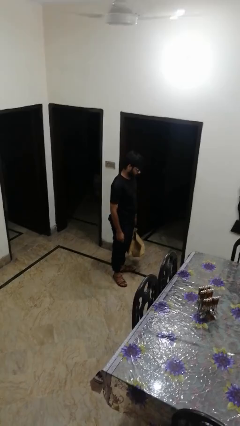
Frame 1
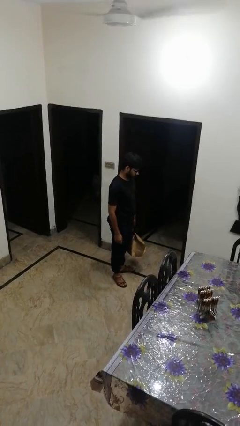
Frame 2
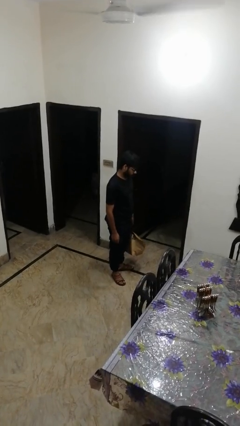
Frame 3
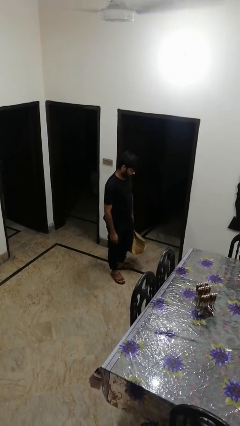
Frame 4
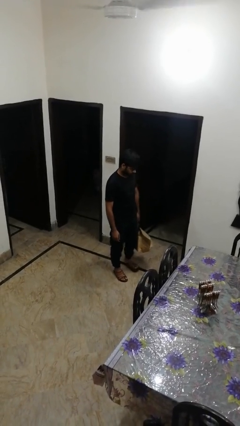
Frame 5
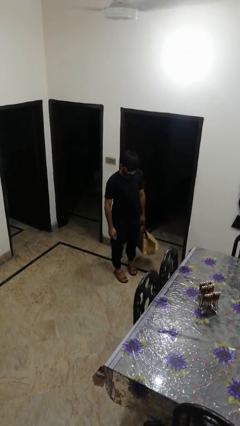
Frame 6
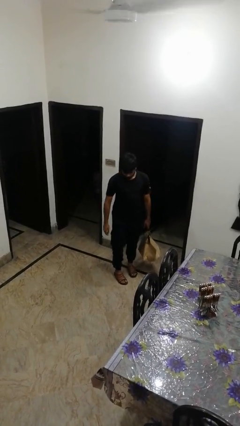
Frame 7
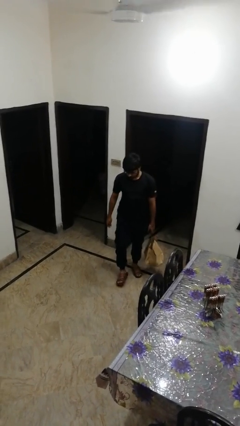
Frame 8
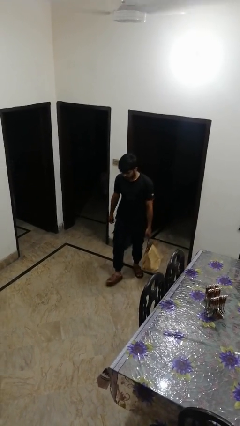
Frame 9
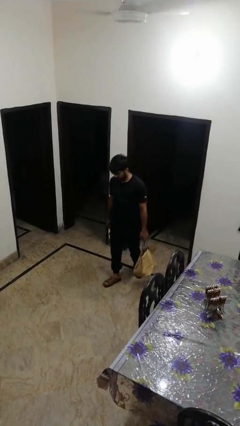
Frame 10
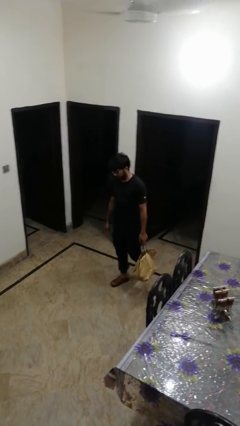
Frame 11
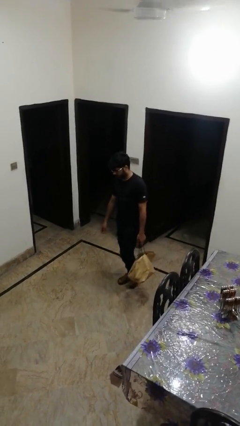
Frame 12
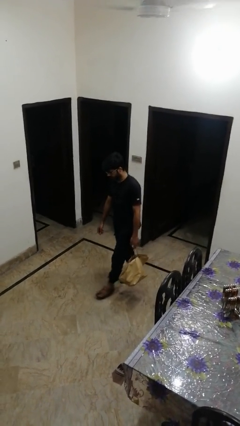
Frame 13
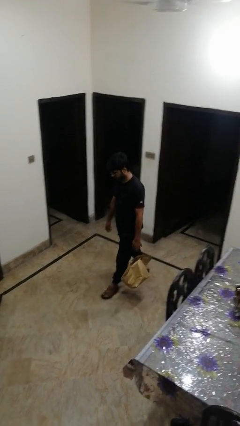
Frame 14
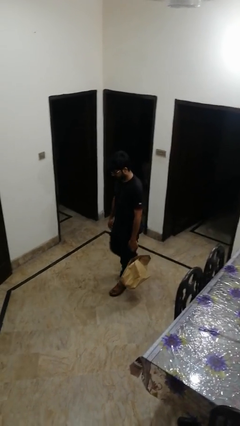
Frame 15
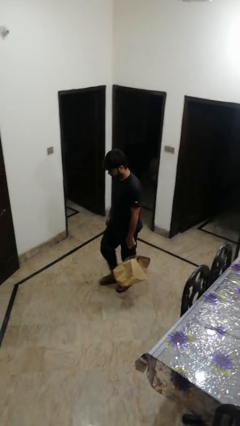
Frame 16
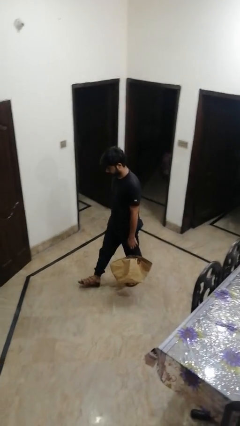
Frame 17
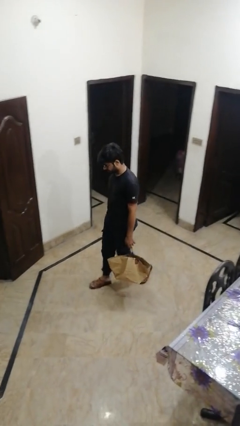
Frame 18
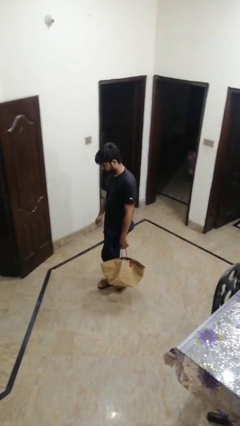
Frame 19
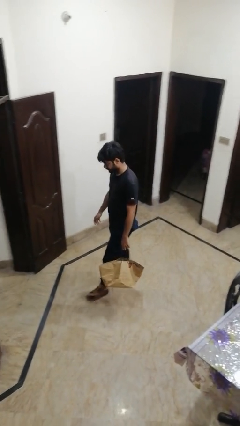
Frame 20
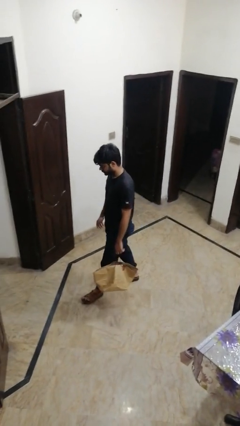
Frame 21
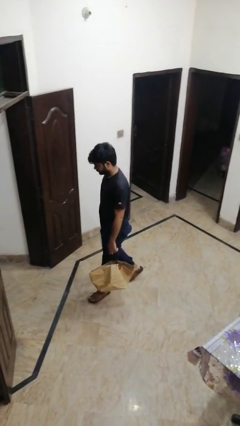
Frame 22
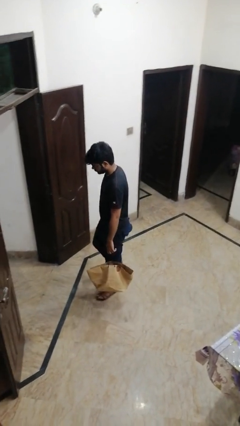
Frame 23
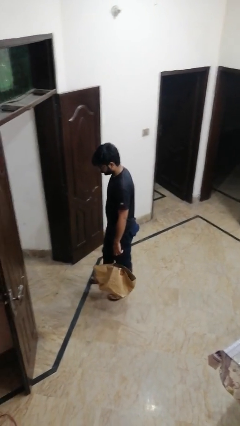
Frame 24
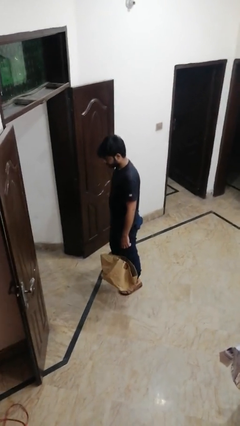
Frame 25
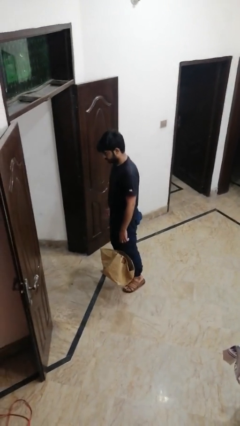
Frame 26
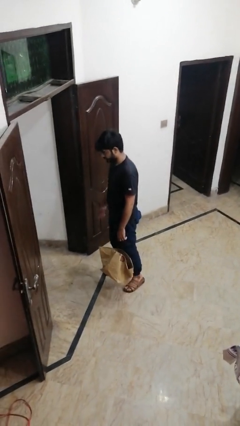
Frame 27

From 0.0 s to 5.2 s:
person carries groceries

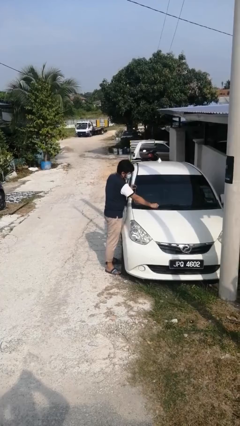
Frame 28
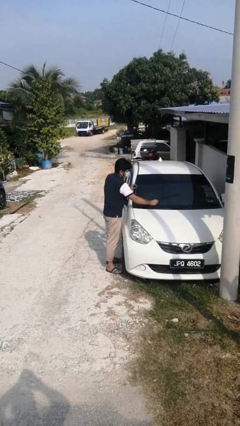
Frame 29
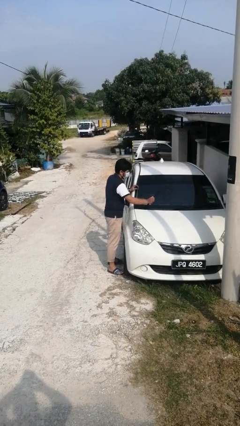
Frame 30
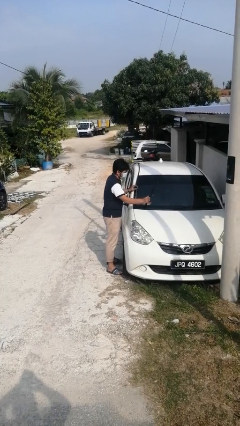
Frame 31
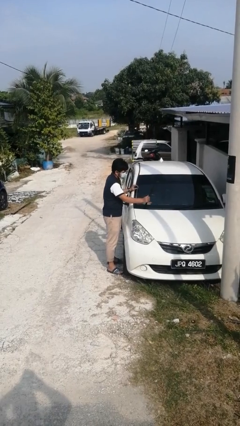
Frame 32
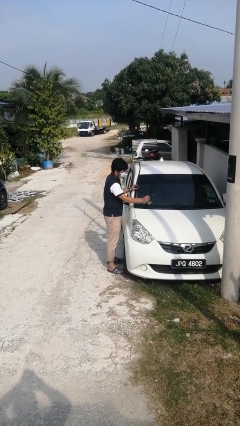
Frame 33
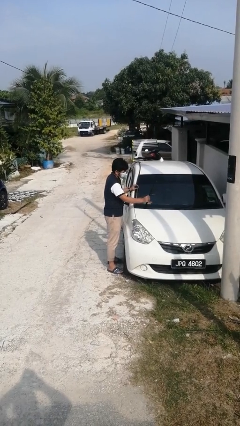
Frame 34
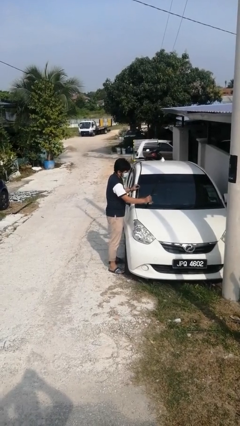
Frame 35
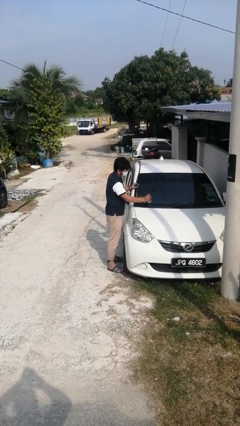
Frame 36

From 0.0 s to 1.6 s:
person flips up car wipers

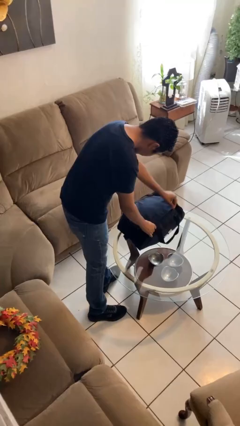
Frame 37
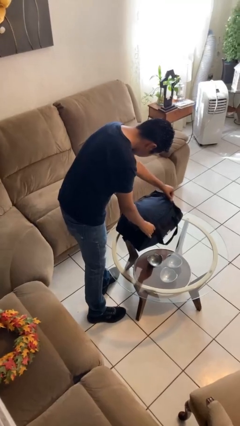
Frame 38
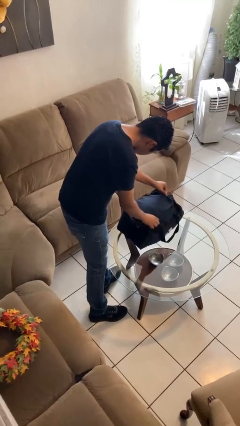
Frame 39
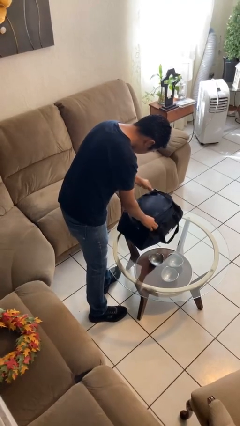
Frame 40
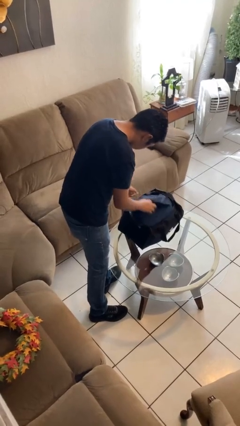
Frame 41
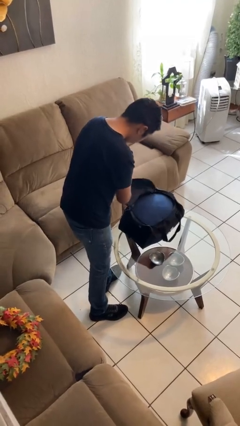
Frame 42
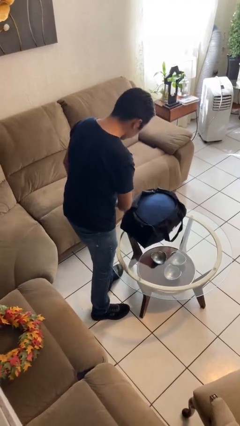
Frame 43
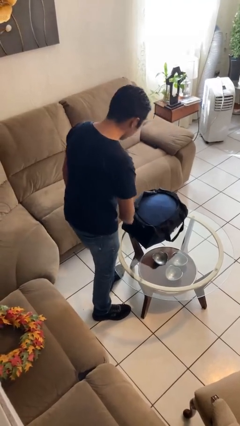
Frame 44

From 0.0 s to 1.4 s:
person opens suitcase

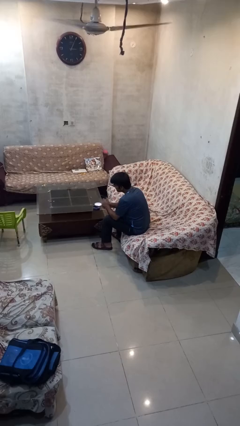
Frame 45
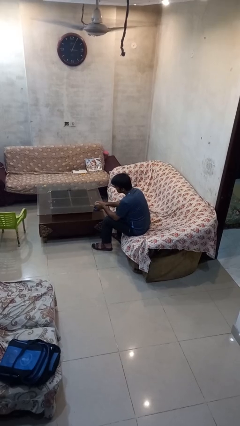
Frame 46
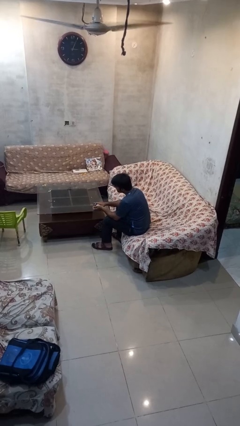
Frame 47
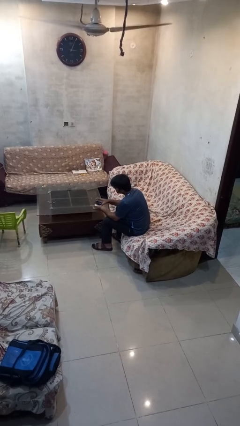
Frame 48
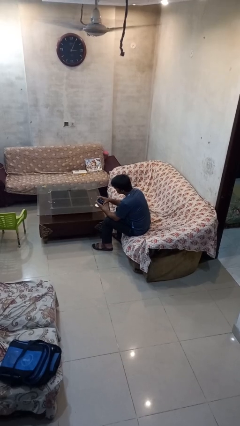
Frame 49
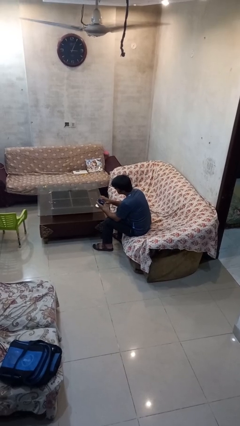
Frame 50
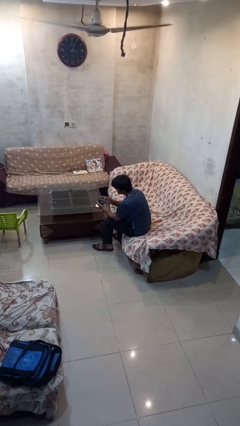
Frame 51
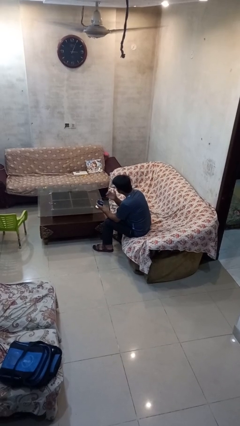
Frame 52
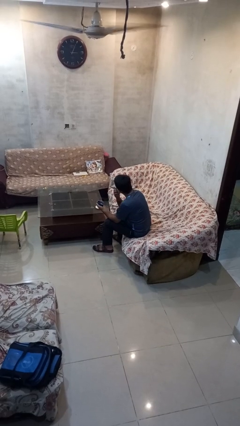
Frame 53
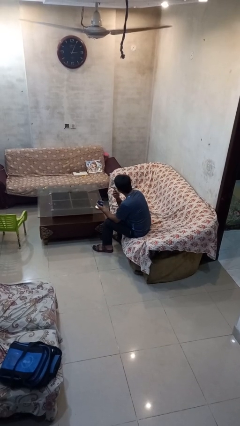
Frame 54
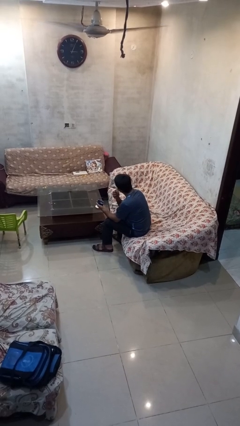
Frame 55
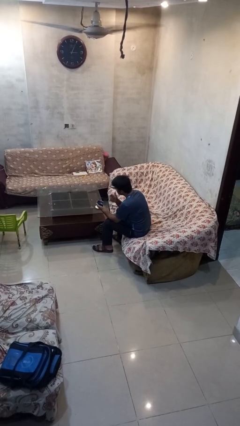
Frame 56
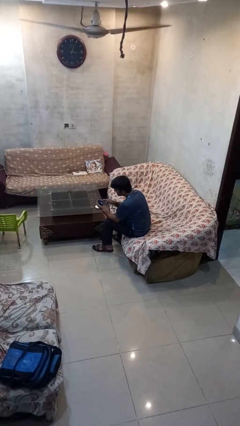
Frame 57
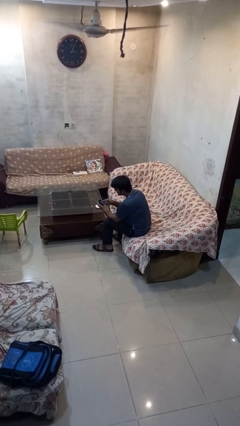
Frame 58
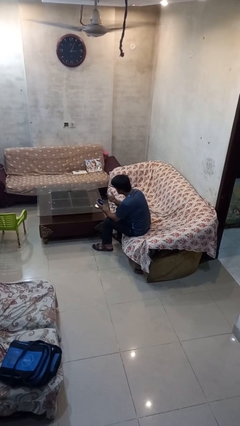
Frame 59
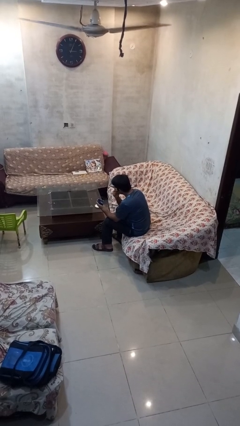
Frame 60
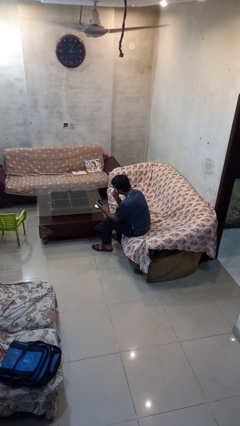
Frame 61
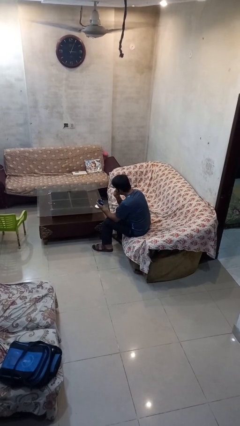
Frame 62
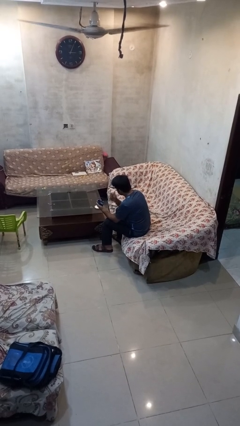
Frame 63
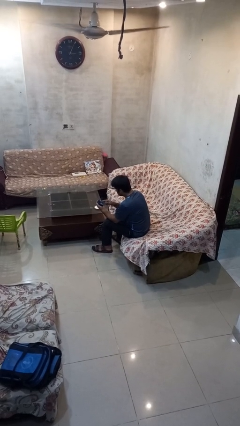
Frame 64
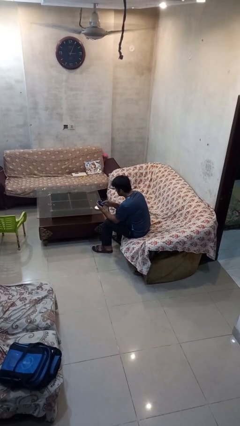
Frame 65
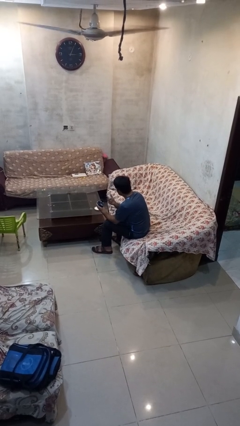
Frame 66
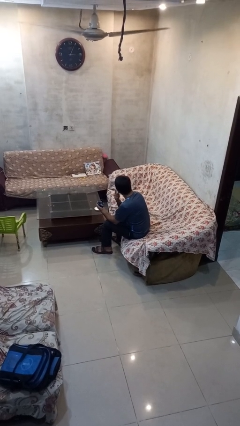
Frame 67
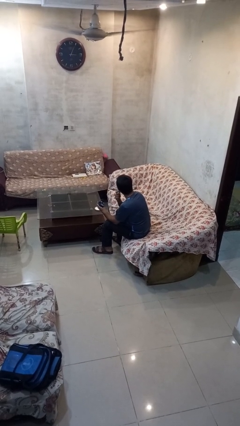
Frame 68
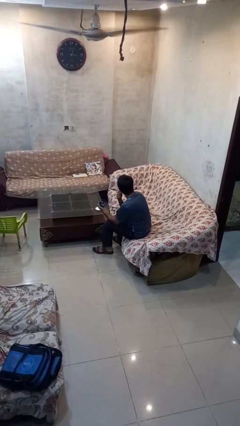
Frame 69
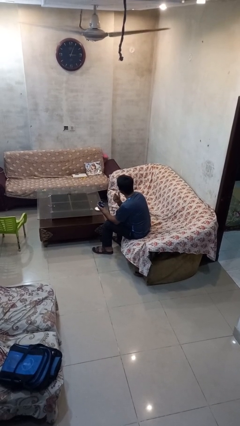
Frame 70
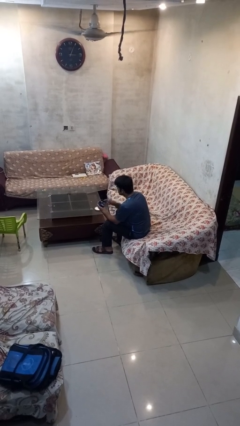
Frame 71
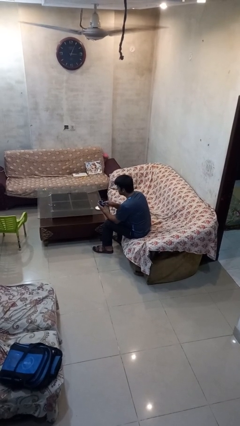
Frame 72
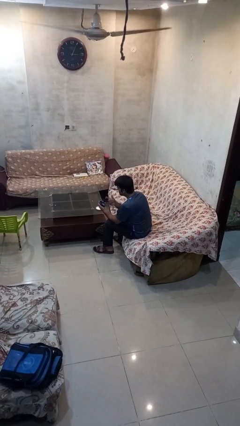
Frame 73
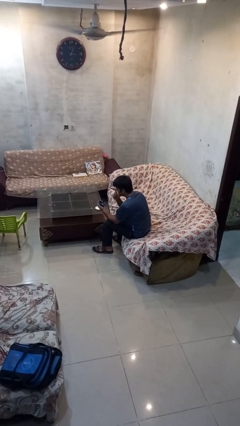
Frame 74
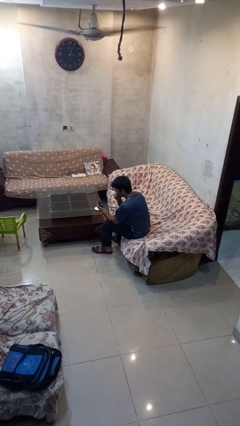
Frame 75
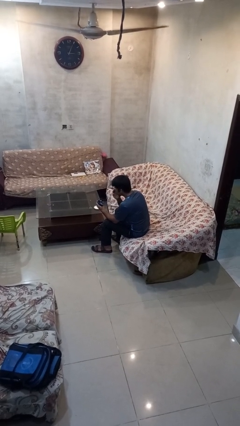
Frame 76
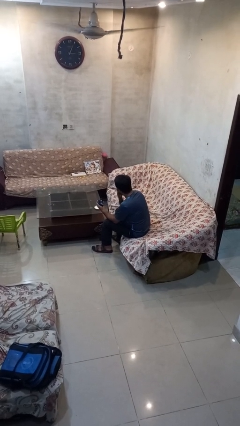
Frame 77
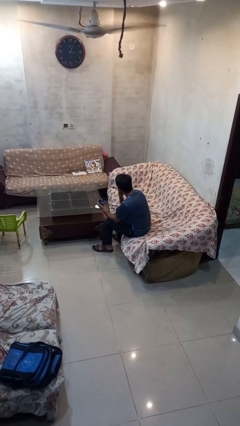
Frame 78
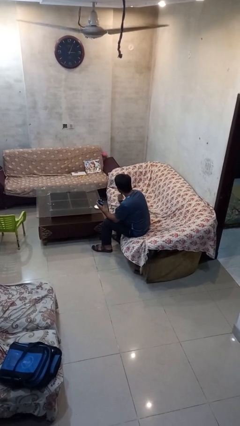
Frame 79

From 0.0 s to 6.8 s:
person applies facial moisturizer

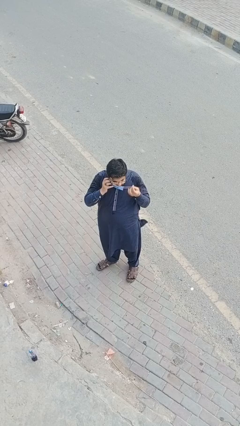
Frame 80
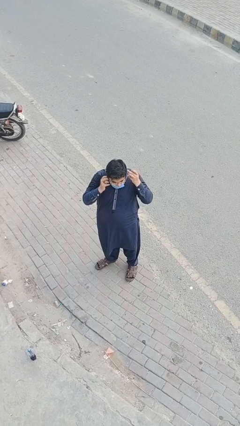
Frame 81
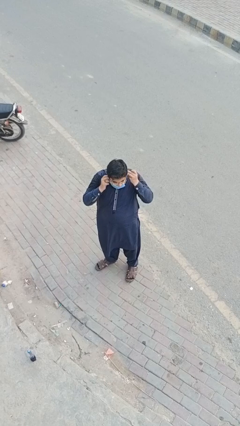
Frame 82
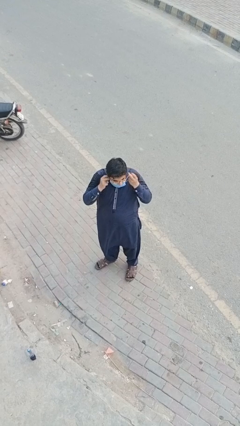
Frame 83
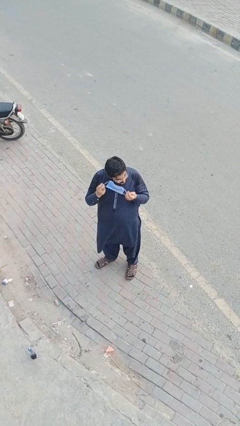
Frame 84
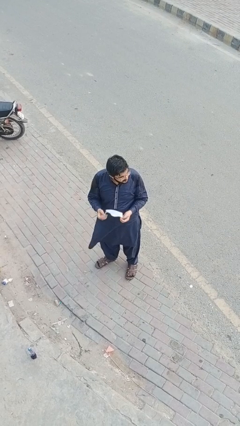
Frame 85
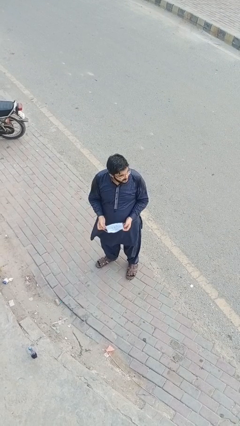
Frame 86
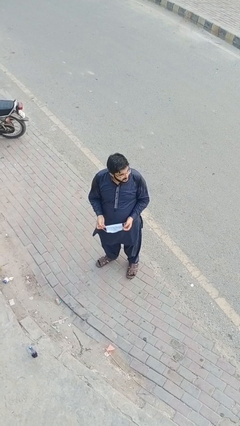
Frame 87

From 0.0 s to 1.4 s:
person takes off facemask

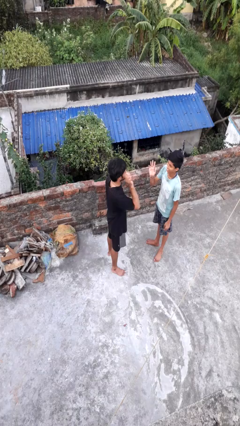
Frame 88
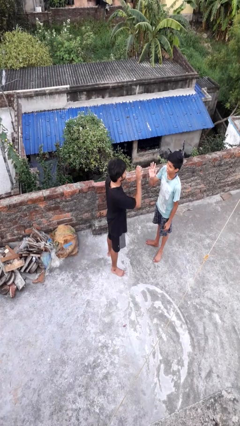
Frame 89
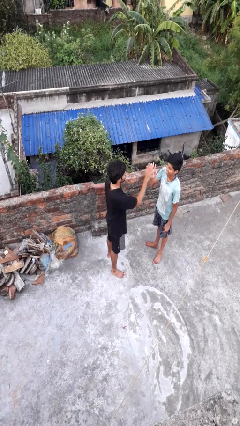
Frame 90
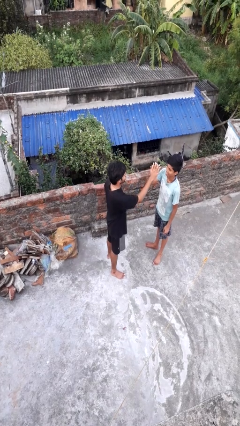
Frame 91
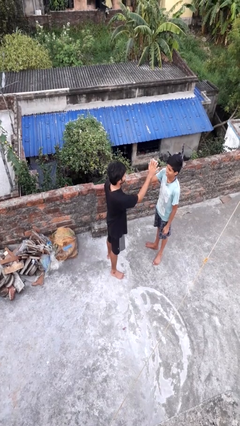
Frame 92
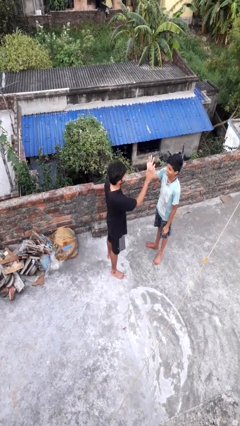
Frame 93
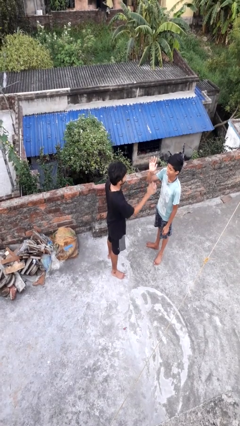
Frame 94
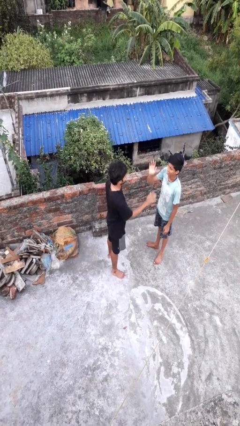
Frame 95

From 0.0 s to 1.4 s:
person highfives hand
